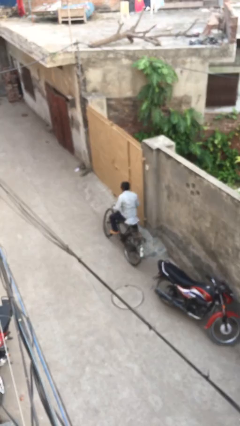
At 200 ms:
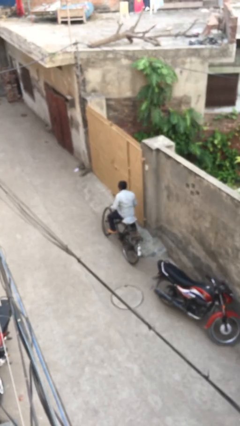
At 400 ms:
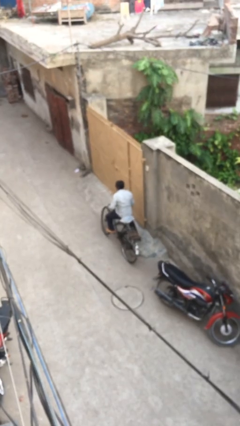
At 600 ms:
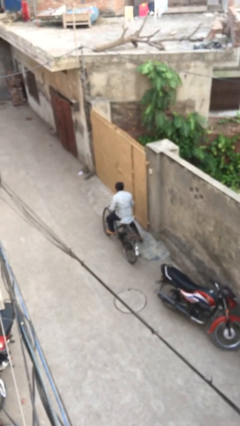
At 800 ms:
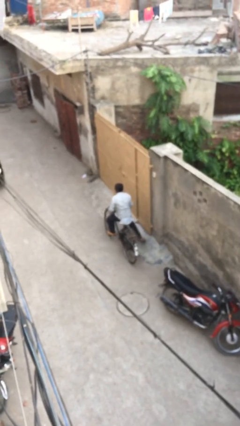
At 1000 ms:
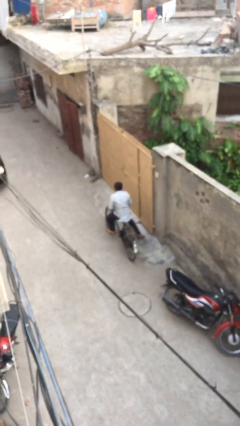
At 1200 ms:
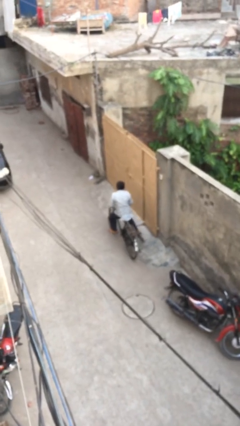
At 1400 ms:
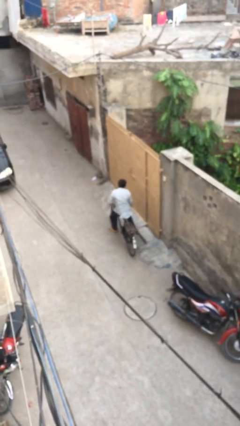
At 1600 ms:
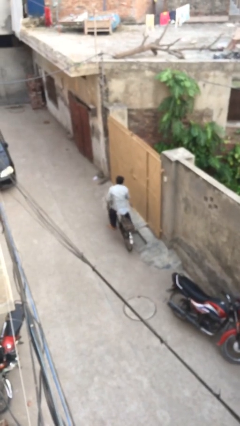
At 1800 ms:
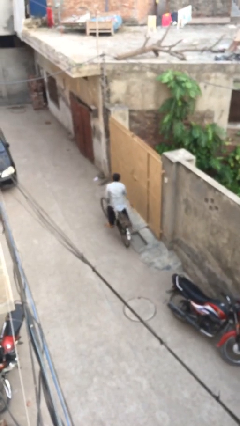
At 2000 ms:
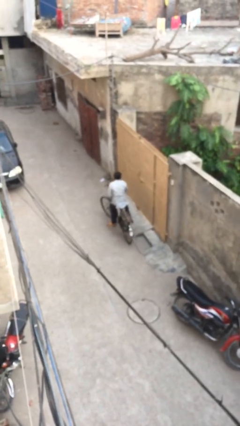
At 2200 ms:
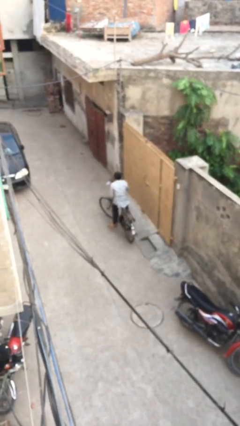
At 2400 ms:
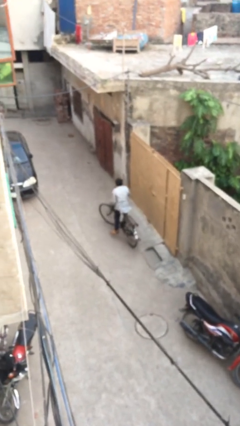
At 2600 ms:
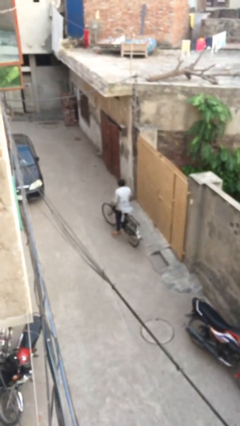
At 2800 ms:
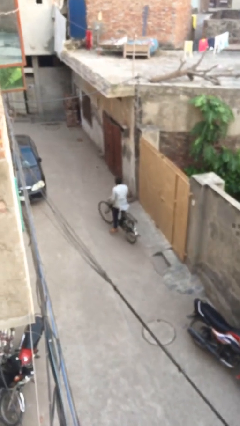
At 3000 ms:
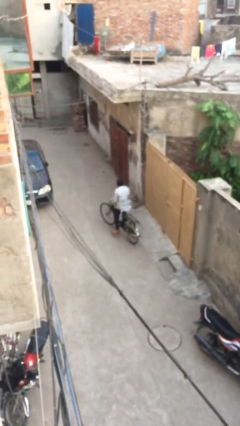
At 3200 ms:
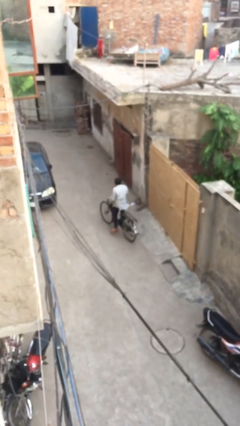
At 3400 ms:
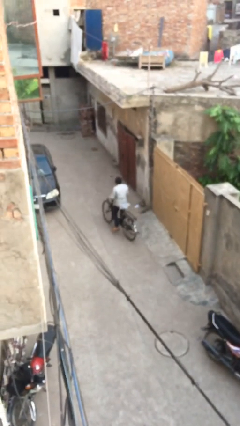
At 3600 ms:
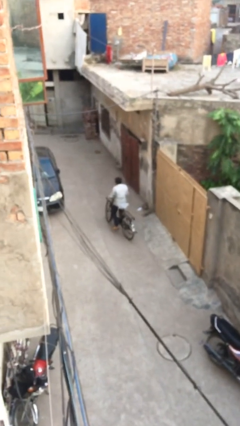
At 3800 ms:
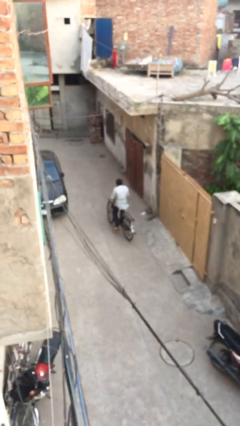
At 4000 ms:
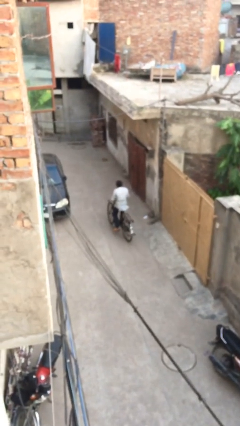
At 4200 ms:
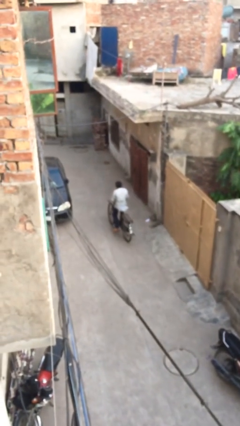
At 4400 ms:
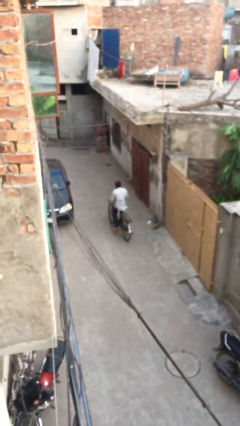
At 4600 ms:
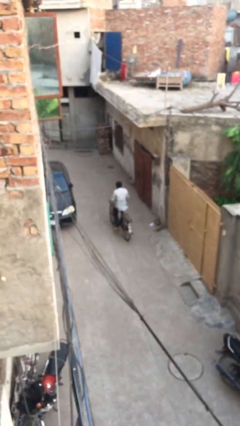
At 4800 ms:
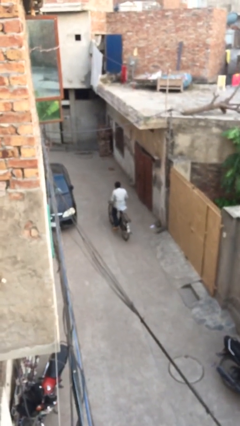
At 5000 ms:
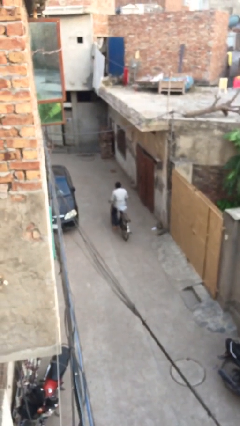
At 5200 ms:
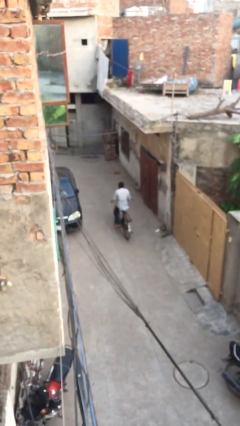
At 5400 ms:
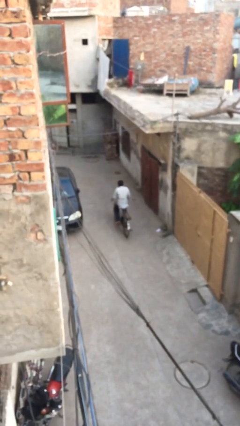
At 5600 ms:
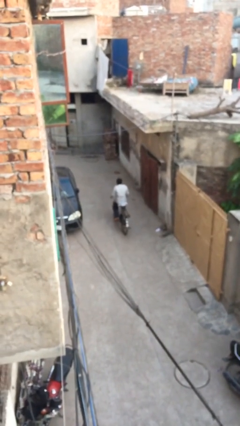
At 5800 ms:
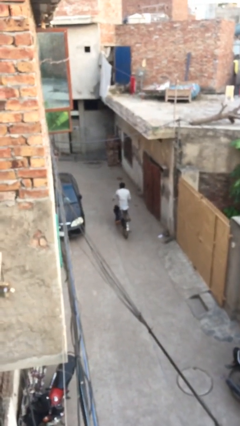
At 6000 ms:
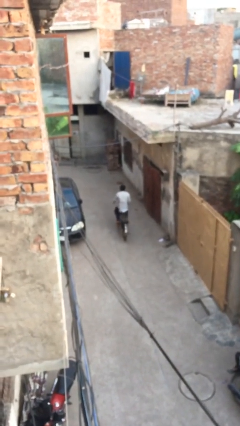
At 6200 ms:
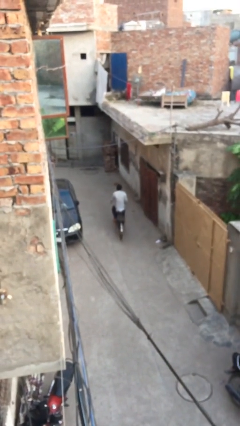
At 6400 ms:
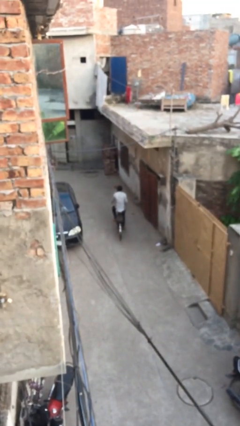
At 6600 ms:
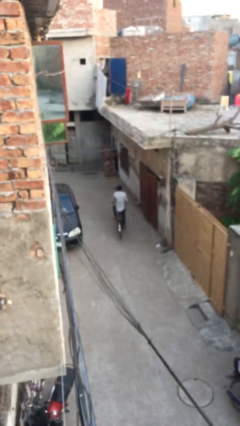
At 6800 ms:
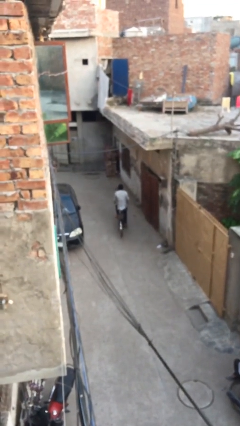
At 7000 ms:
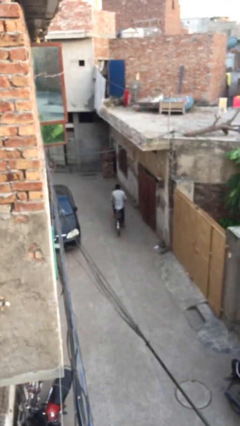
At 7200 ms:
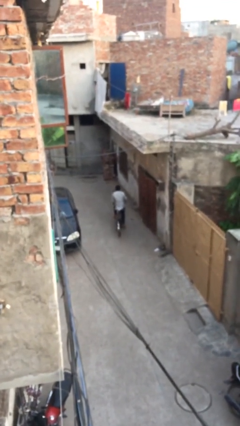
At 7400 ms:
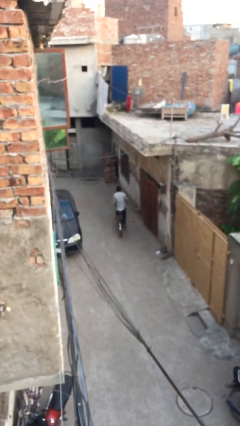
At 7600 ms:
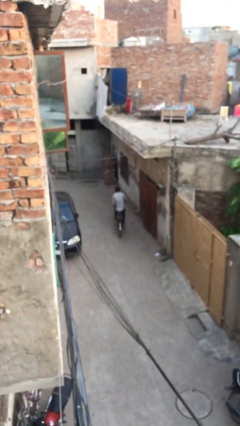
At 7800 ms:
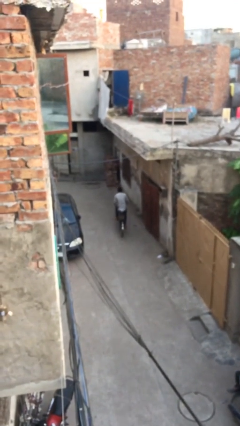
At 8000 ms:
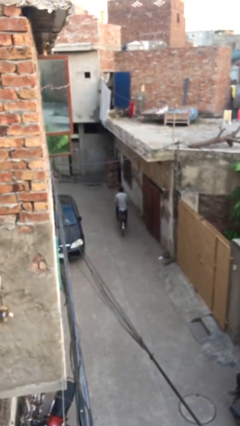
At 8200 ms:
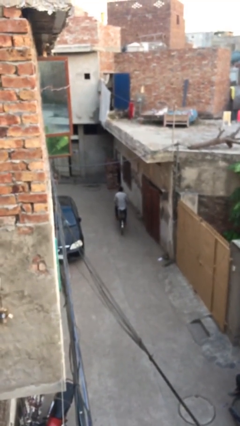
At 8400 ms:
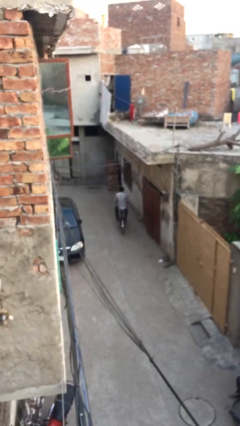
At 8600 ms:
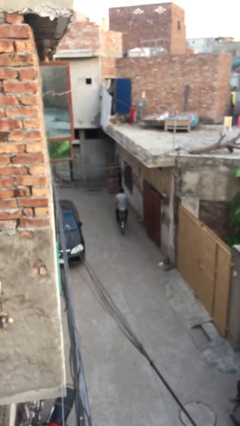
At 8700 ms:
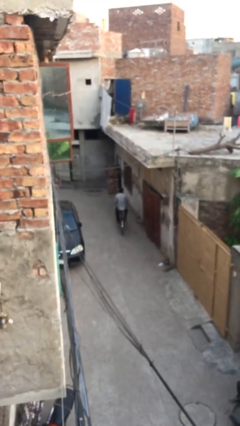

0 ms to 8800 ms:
person rides bicycle

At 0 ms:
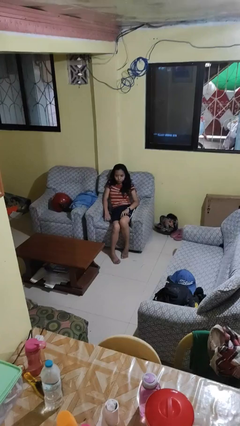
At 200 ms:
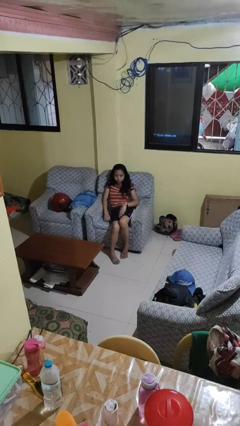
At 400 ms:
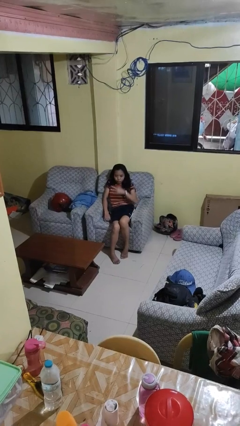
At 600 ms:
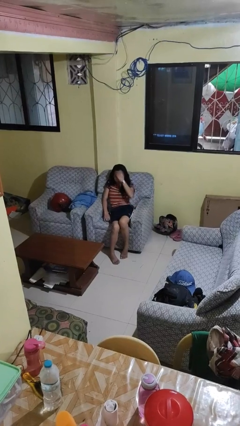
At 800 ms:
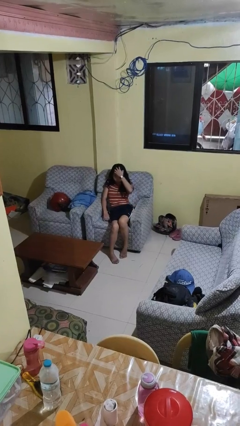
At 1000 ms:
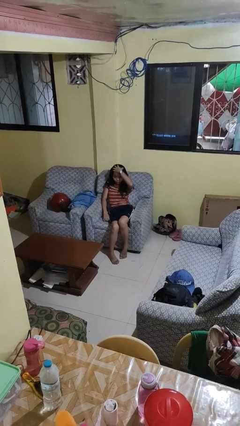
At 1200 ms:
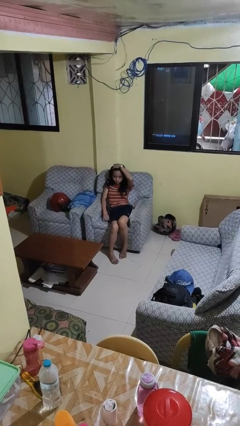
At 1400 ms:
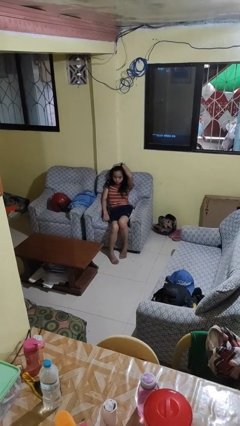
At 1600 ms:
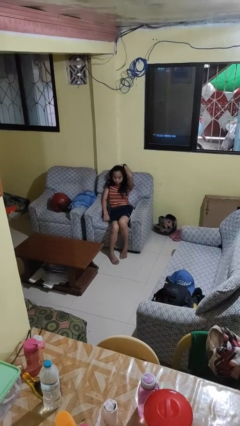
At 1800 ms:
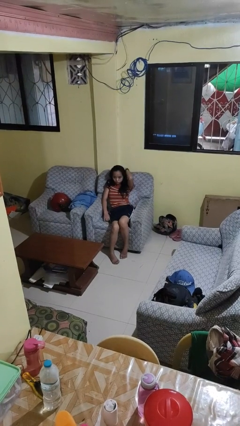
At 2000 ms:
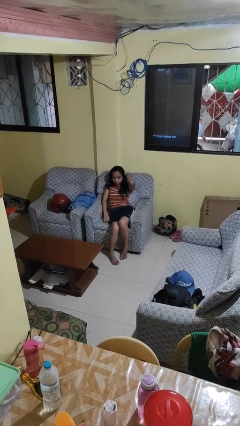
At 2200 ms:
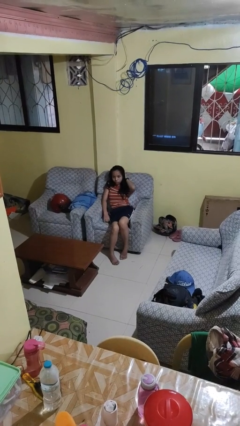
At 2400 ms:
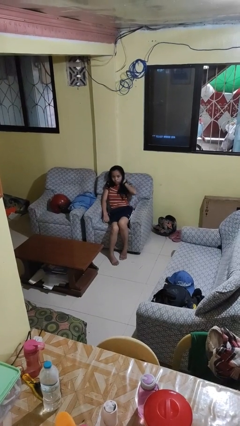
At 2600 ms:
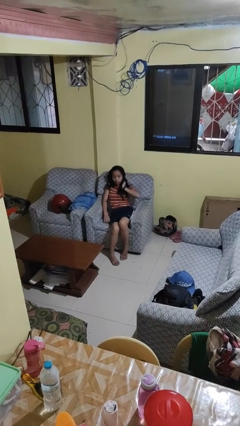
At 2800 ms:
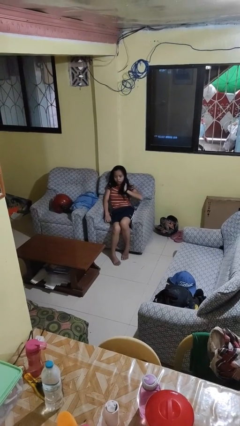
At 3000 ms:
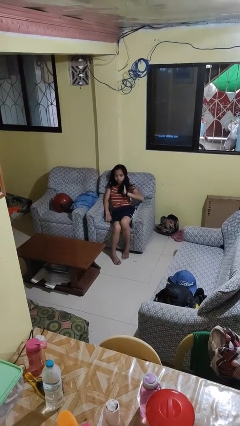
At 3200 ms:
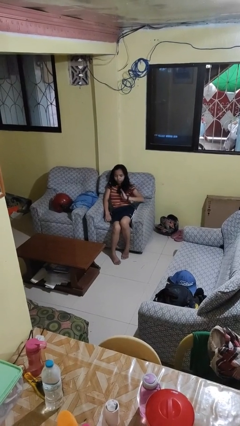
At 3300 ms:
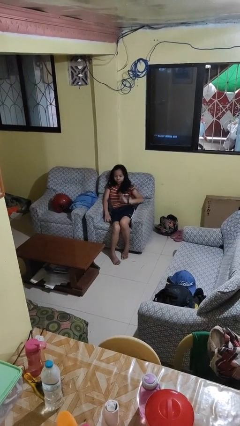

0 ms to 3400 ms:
person strokes hair

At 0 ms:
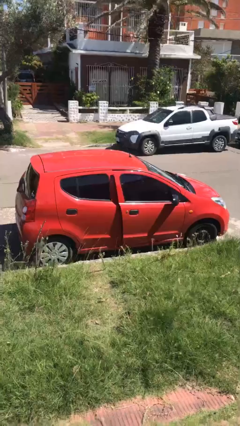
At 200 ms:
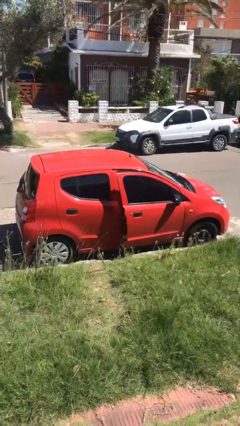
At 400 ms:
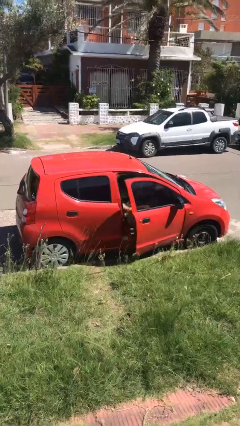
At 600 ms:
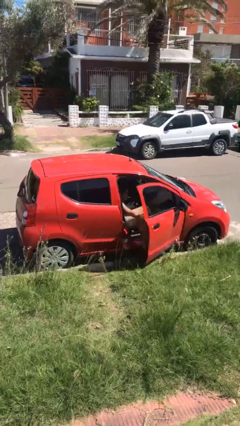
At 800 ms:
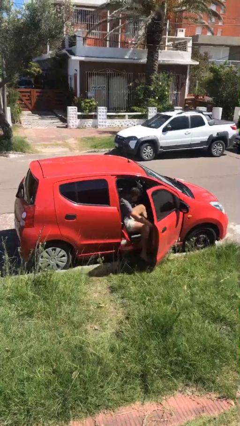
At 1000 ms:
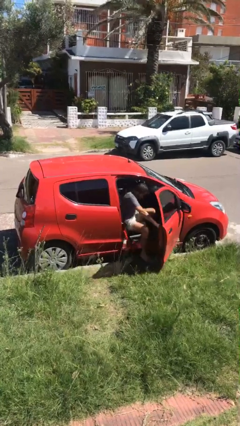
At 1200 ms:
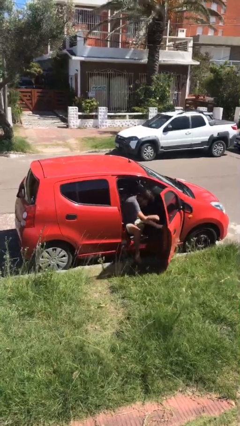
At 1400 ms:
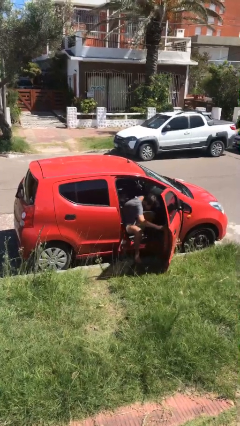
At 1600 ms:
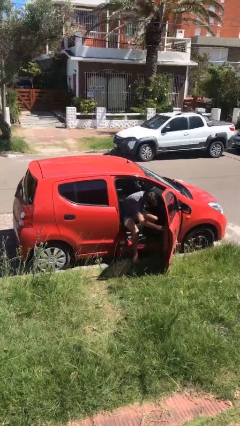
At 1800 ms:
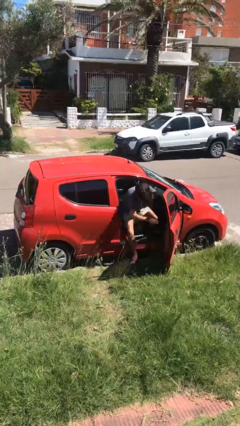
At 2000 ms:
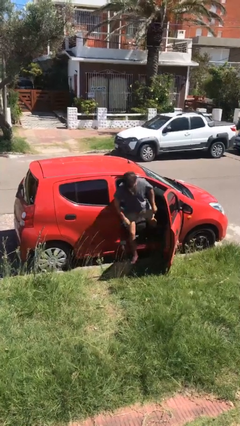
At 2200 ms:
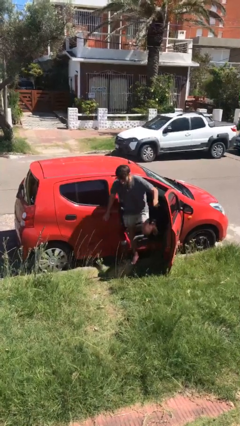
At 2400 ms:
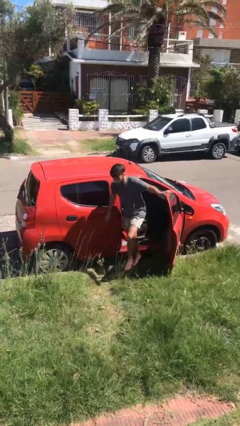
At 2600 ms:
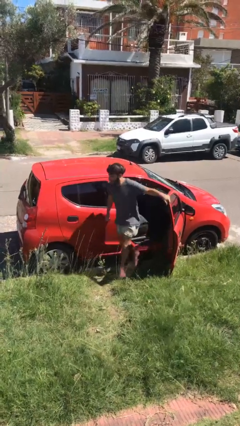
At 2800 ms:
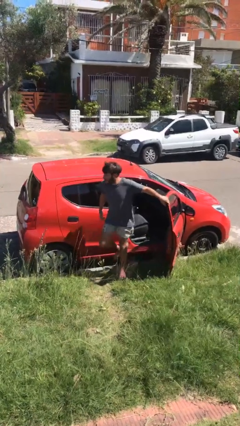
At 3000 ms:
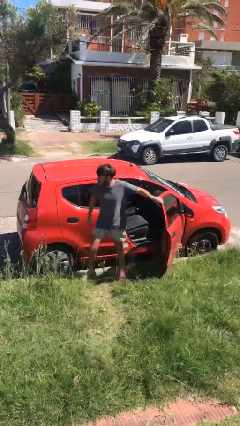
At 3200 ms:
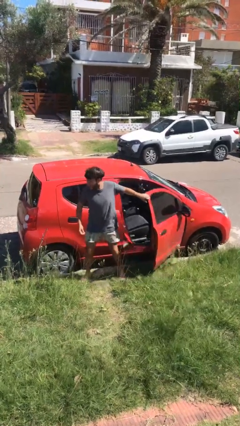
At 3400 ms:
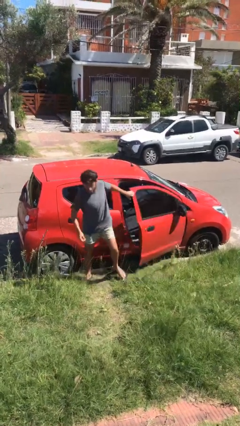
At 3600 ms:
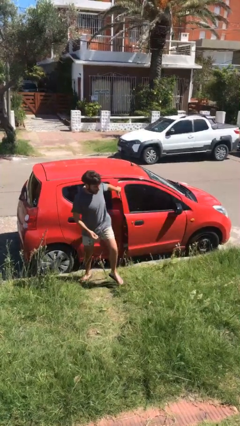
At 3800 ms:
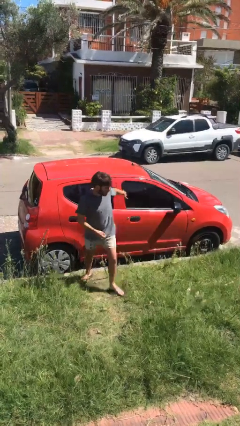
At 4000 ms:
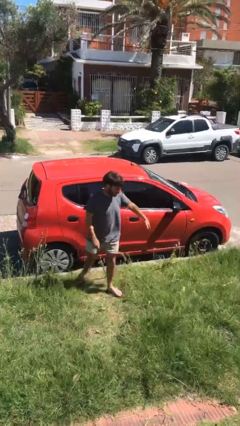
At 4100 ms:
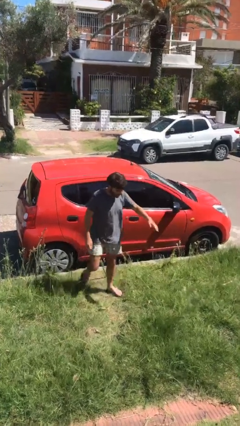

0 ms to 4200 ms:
car drops off person

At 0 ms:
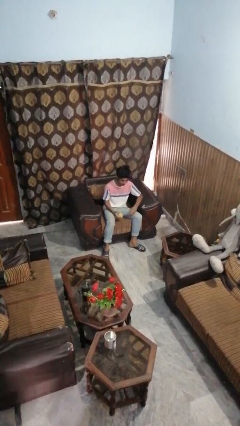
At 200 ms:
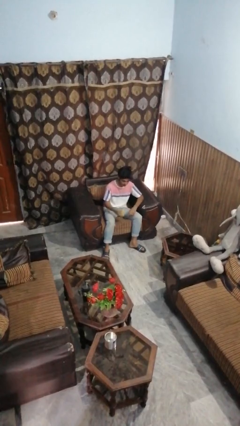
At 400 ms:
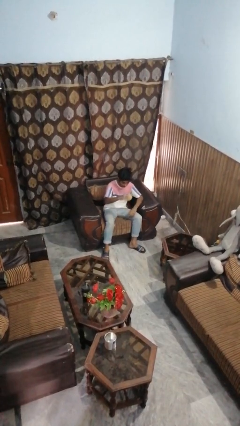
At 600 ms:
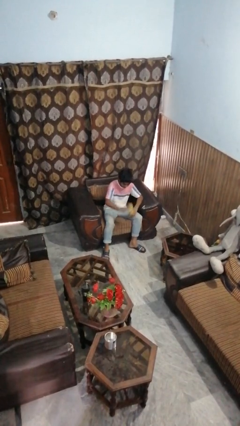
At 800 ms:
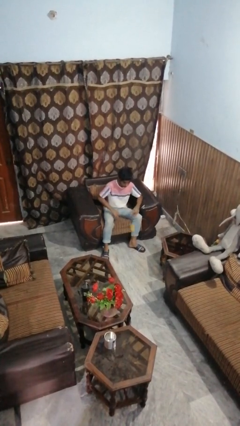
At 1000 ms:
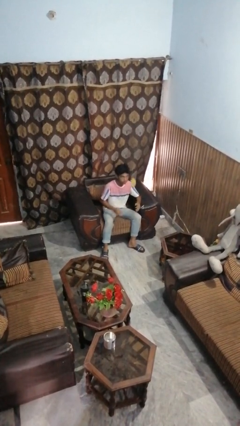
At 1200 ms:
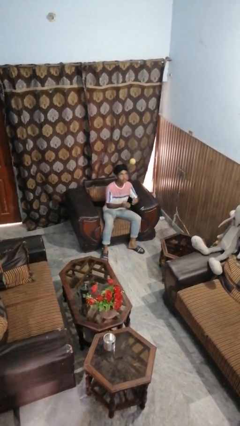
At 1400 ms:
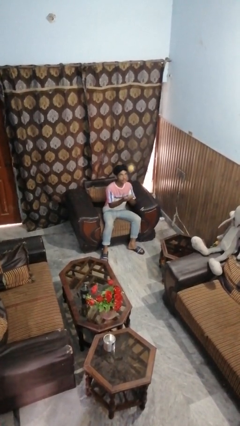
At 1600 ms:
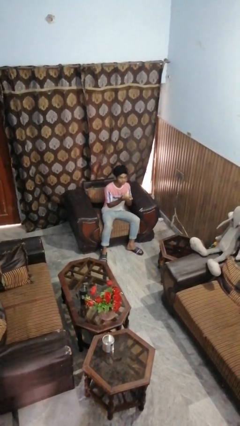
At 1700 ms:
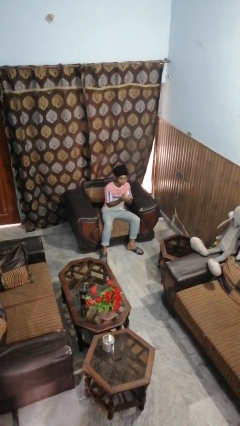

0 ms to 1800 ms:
person bounces ball on floor
